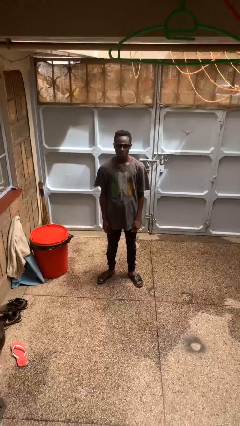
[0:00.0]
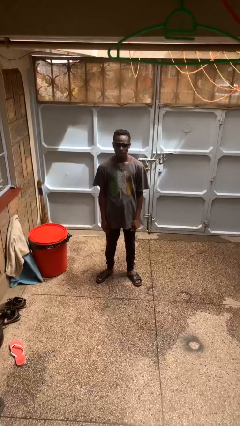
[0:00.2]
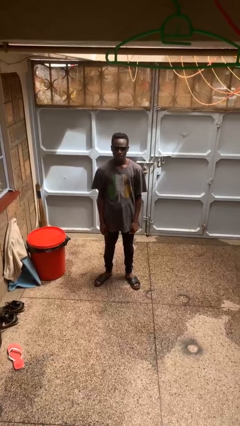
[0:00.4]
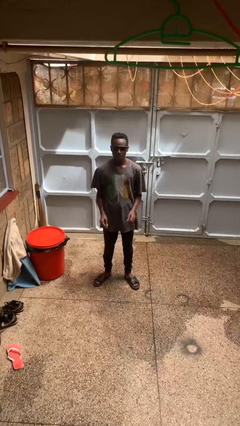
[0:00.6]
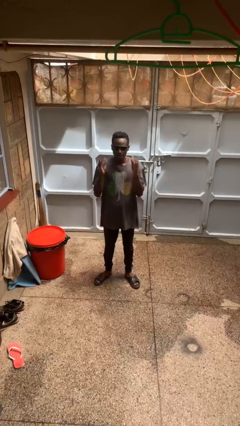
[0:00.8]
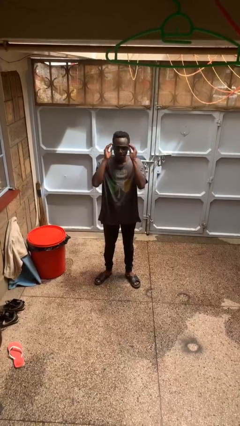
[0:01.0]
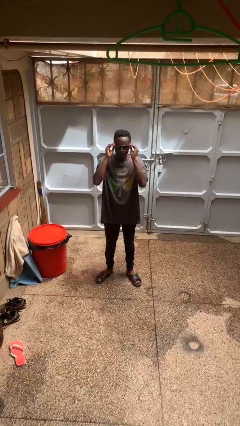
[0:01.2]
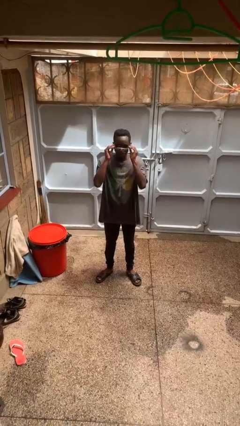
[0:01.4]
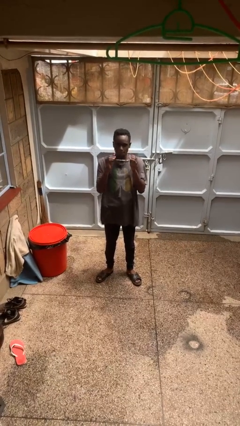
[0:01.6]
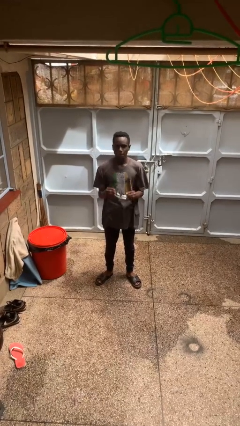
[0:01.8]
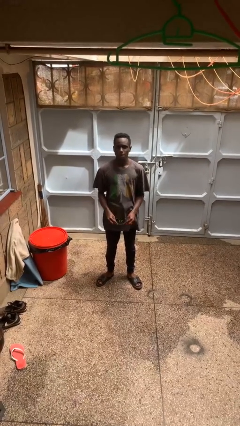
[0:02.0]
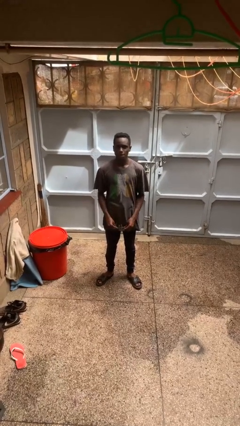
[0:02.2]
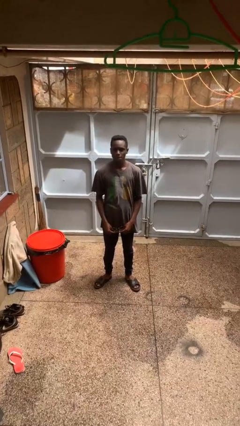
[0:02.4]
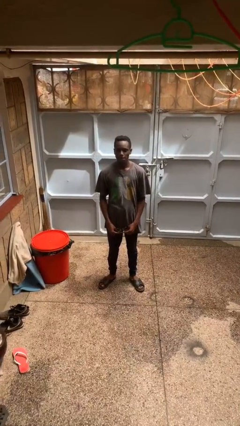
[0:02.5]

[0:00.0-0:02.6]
person takes off sunglasses

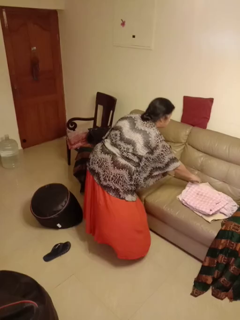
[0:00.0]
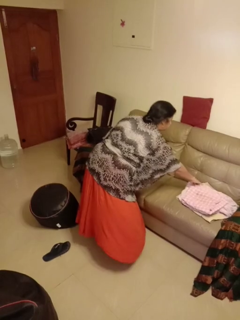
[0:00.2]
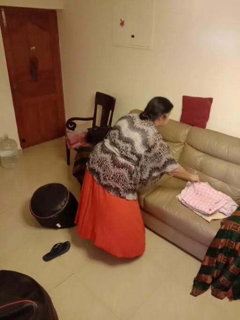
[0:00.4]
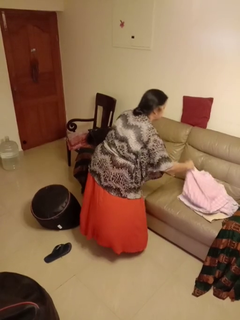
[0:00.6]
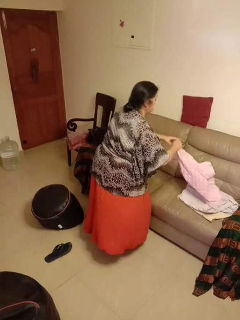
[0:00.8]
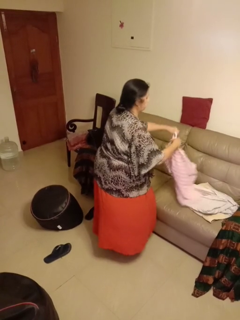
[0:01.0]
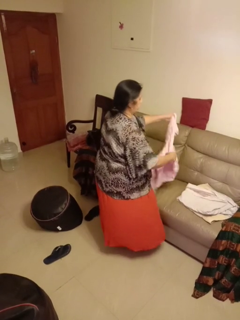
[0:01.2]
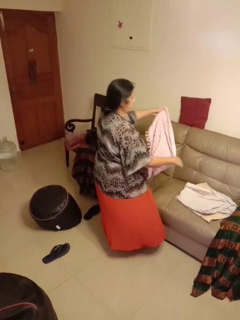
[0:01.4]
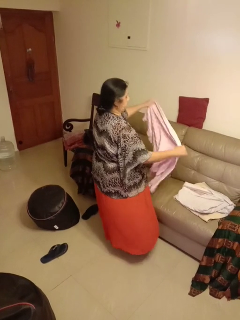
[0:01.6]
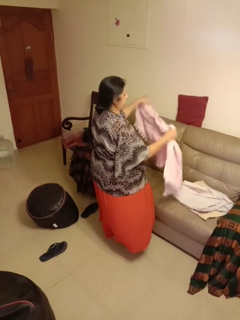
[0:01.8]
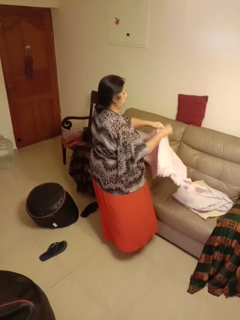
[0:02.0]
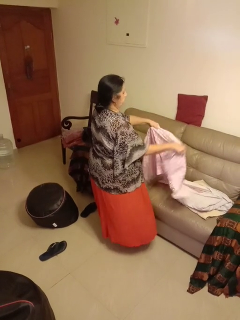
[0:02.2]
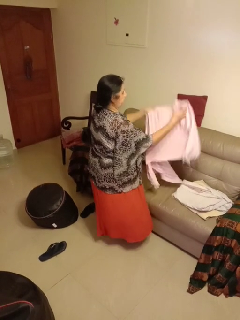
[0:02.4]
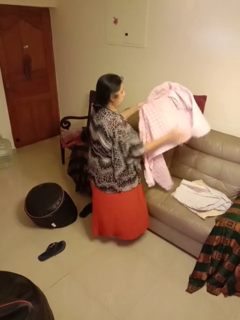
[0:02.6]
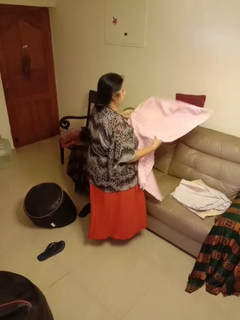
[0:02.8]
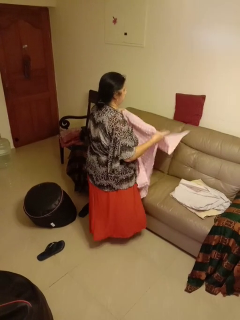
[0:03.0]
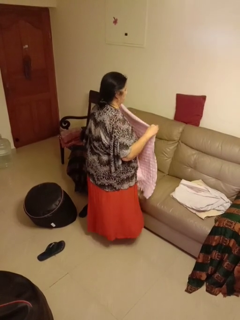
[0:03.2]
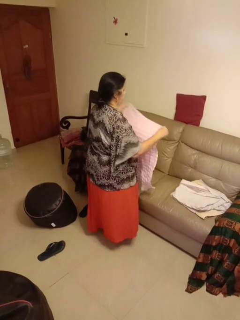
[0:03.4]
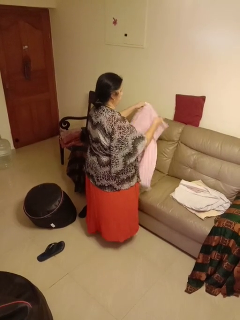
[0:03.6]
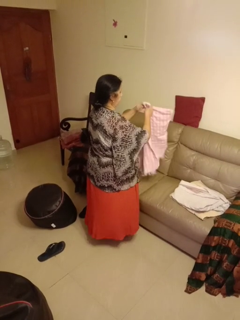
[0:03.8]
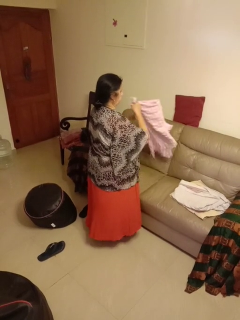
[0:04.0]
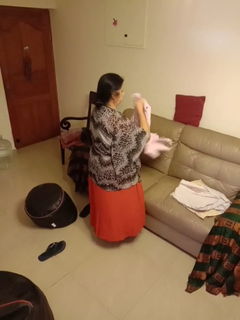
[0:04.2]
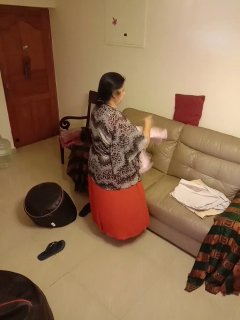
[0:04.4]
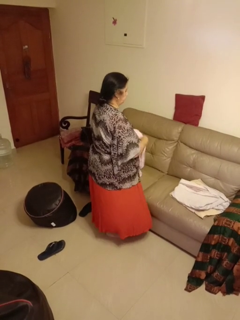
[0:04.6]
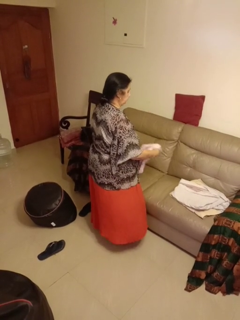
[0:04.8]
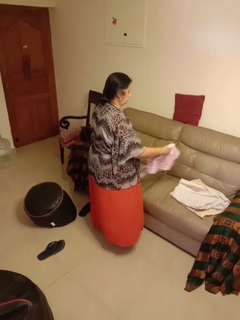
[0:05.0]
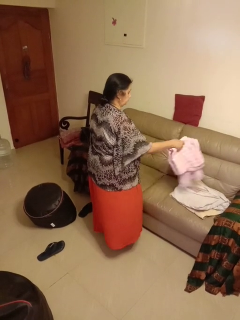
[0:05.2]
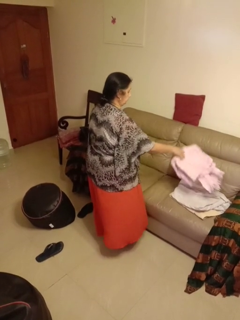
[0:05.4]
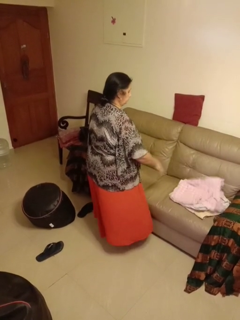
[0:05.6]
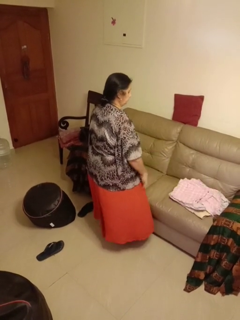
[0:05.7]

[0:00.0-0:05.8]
person folds towel

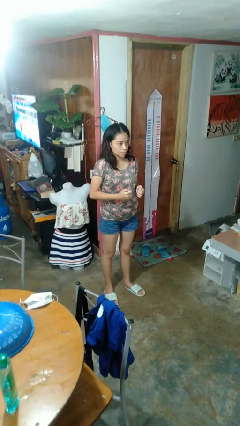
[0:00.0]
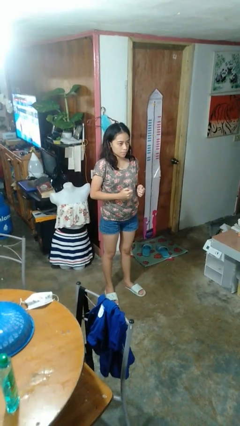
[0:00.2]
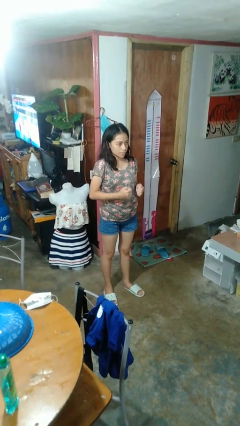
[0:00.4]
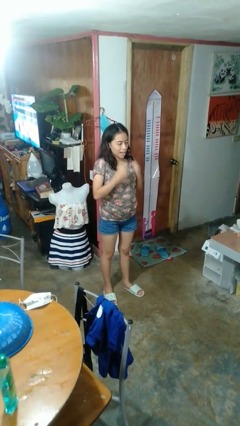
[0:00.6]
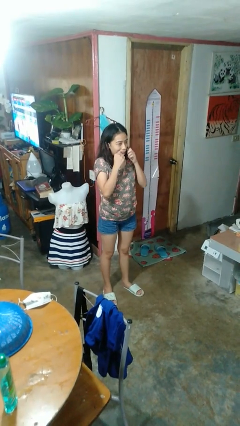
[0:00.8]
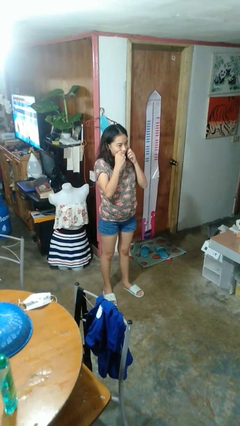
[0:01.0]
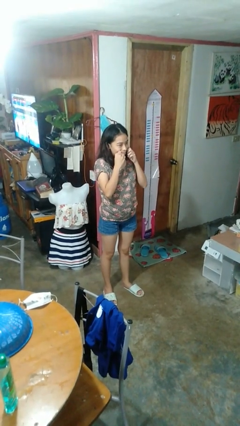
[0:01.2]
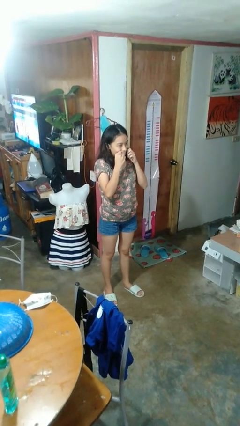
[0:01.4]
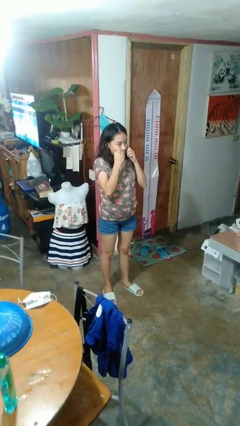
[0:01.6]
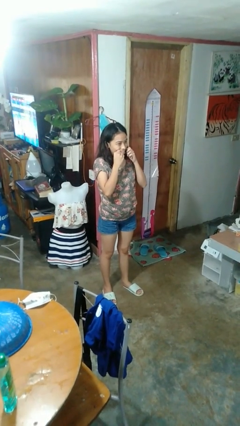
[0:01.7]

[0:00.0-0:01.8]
person flosses

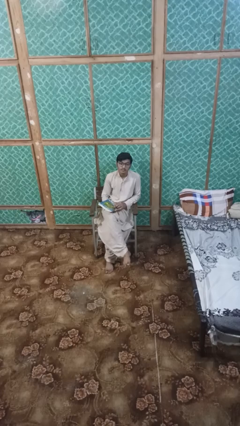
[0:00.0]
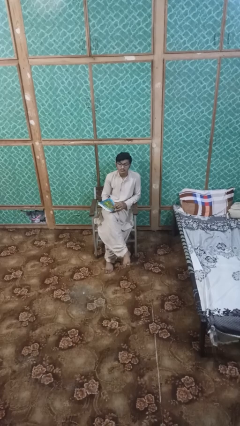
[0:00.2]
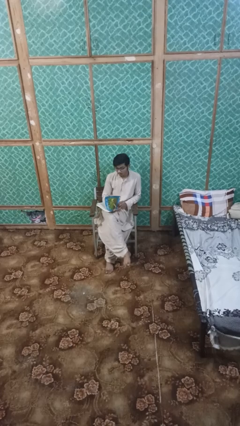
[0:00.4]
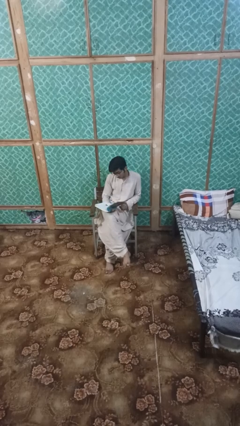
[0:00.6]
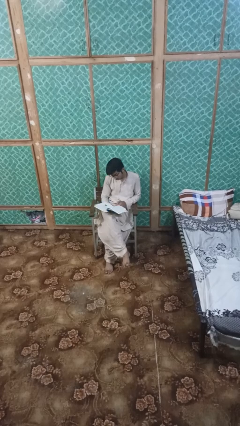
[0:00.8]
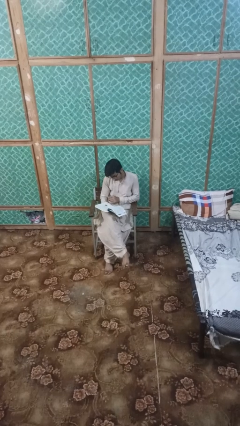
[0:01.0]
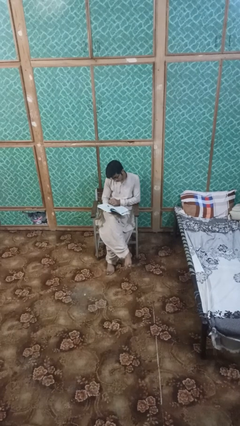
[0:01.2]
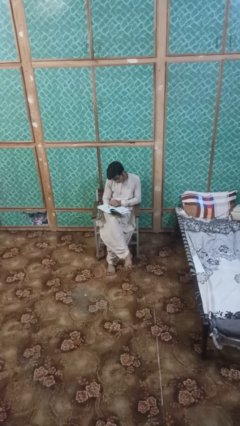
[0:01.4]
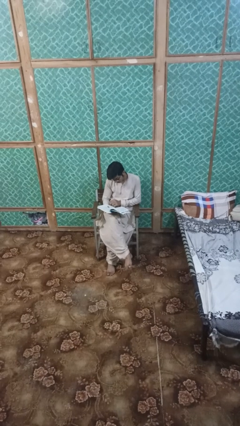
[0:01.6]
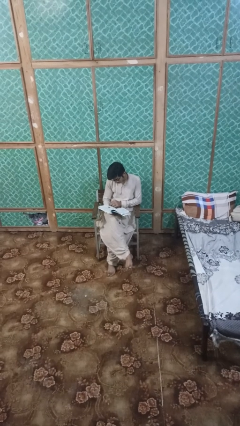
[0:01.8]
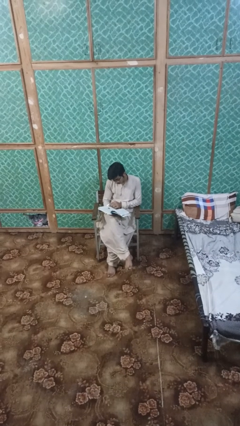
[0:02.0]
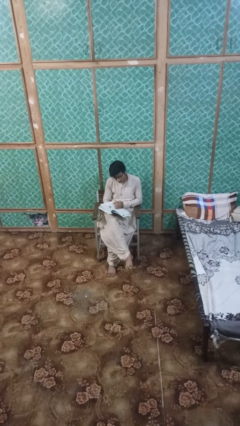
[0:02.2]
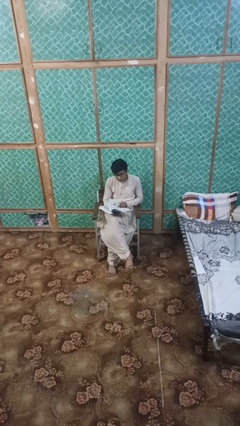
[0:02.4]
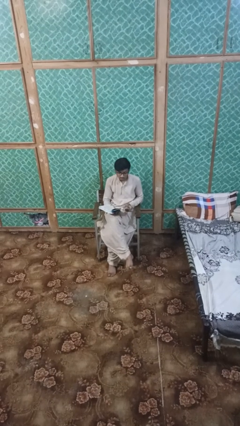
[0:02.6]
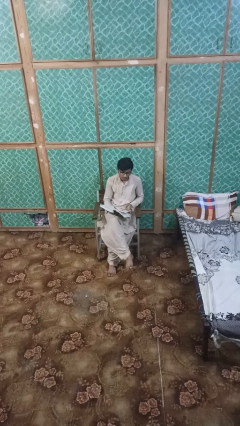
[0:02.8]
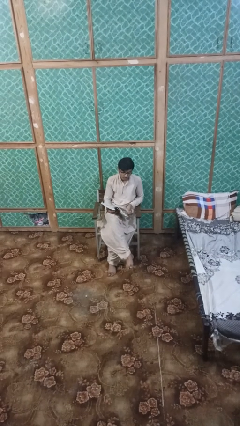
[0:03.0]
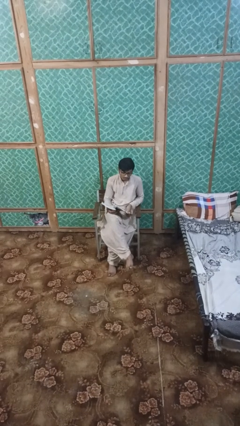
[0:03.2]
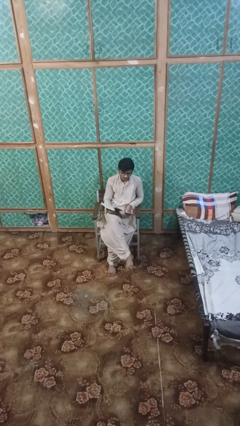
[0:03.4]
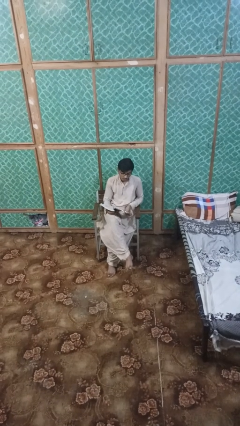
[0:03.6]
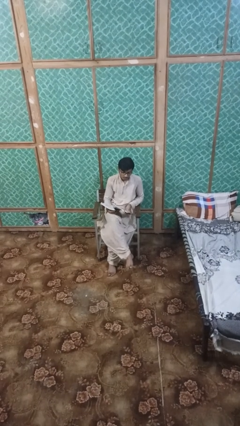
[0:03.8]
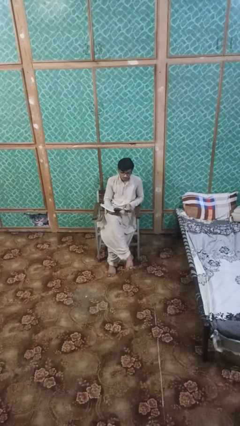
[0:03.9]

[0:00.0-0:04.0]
person reads book

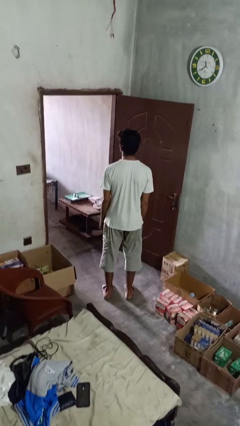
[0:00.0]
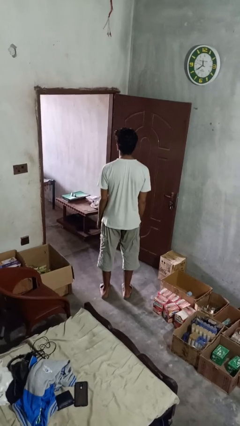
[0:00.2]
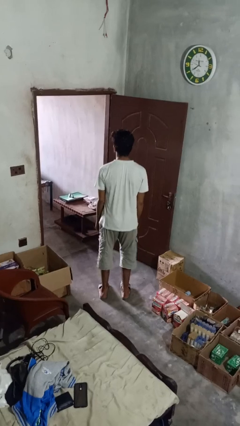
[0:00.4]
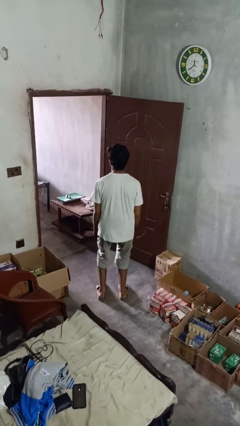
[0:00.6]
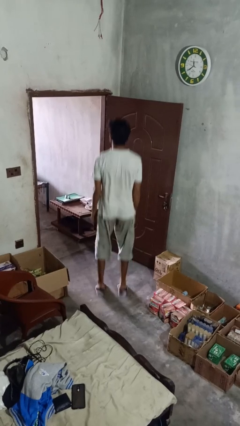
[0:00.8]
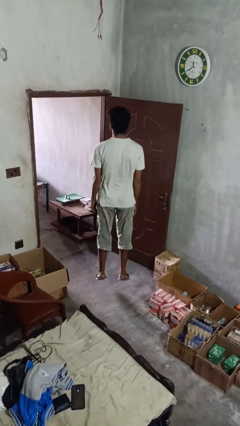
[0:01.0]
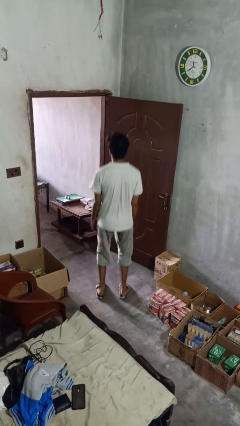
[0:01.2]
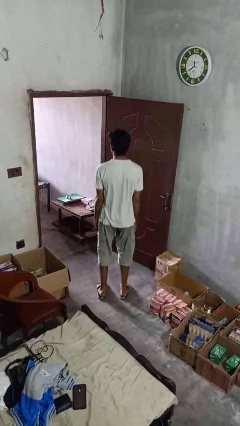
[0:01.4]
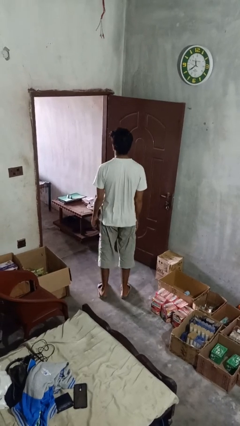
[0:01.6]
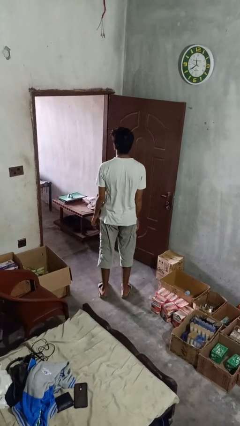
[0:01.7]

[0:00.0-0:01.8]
person jumps

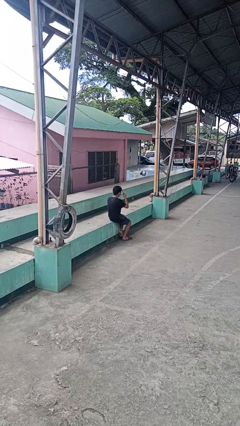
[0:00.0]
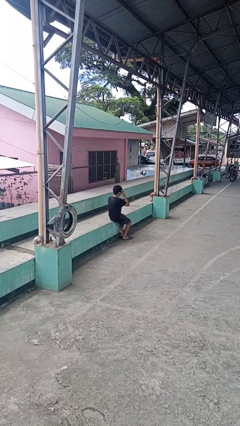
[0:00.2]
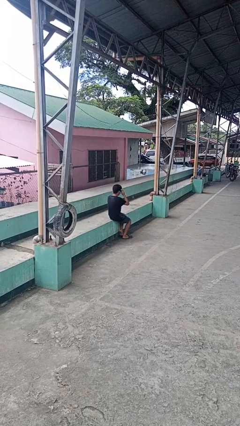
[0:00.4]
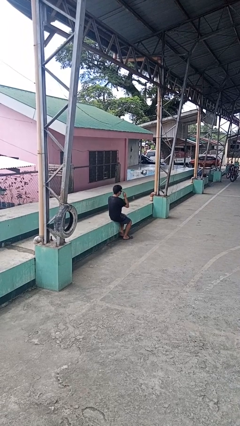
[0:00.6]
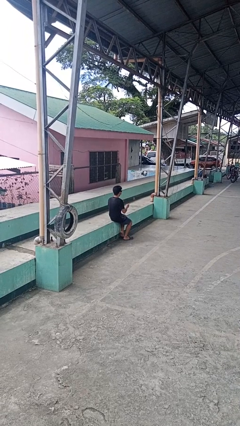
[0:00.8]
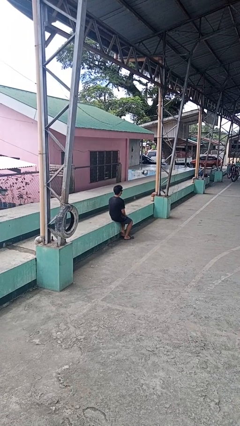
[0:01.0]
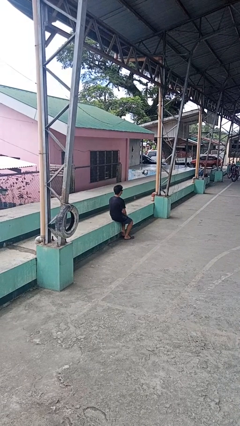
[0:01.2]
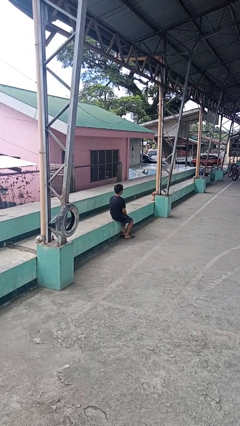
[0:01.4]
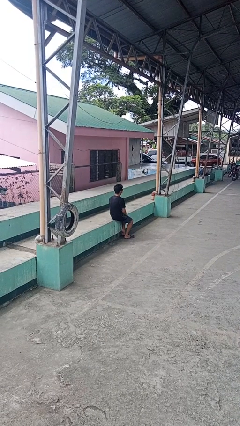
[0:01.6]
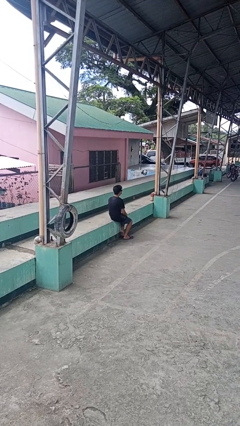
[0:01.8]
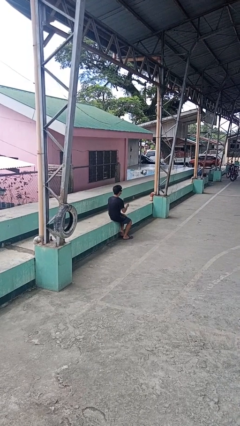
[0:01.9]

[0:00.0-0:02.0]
person puts on sunglasses

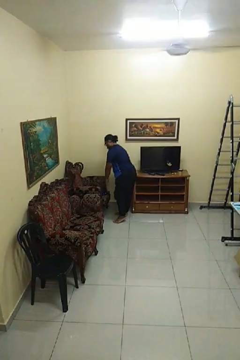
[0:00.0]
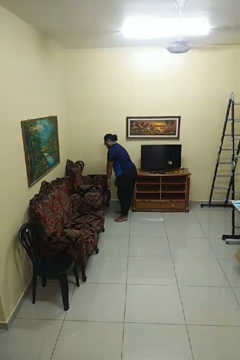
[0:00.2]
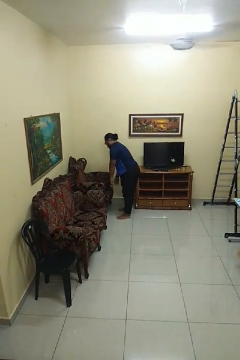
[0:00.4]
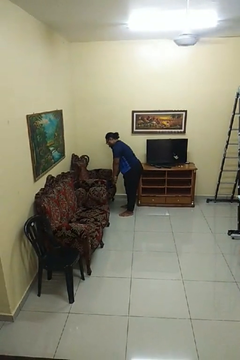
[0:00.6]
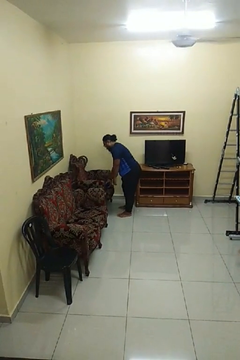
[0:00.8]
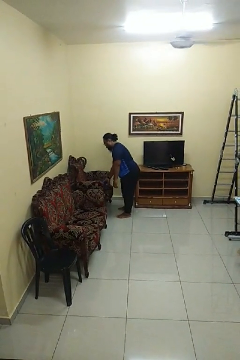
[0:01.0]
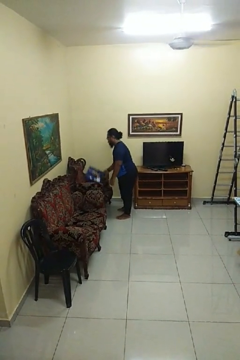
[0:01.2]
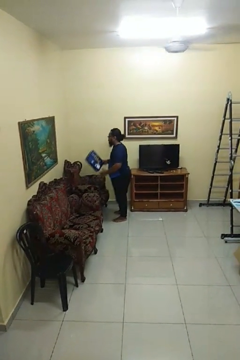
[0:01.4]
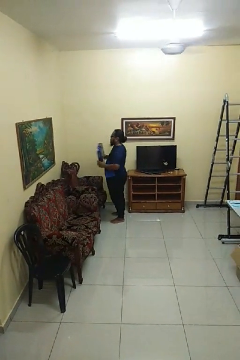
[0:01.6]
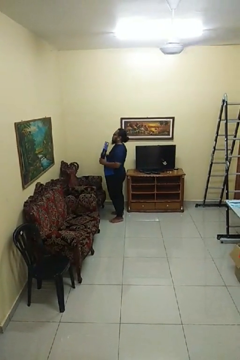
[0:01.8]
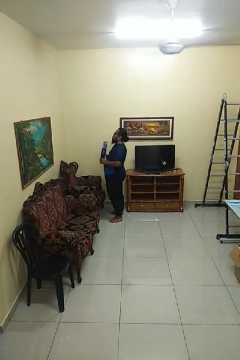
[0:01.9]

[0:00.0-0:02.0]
person picks up object from couch
